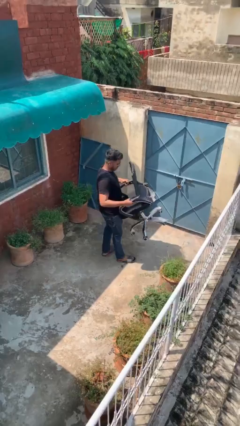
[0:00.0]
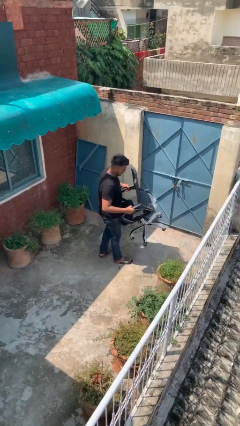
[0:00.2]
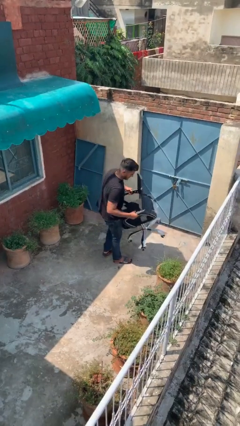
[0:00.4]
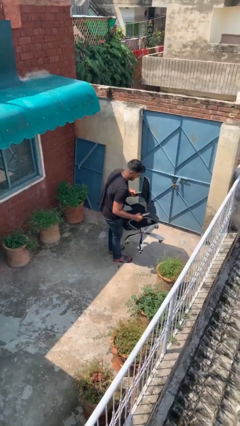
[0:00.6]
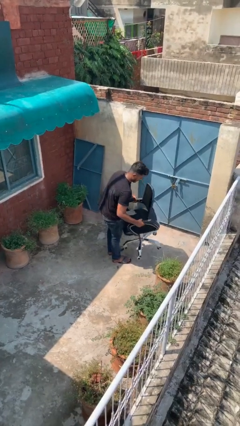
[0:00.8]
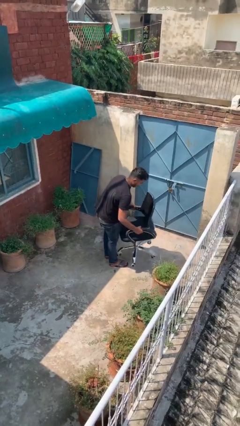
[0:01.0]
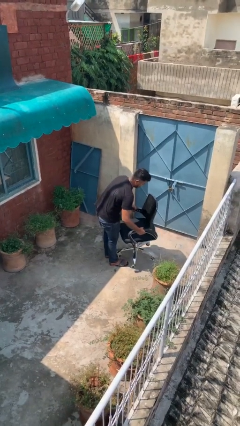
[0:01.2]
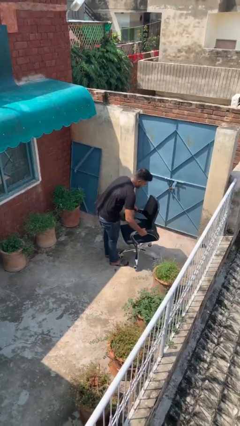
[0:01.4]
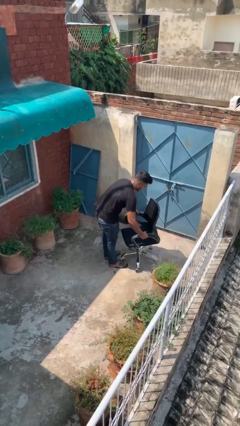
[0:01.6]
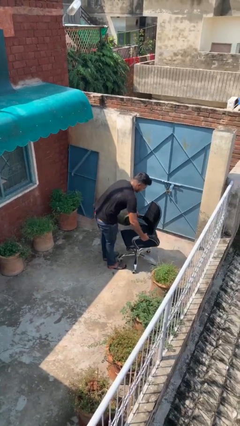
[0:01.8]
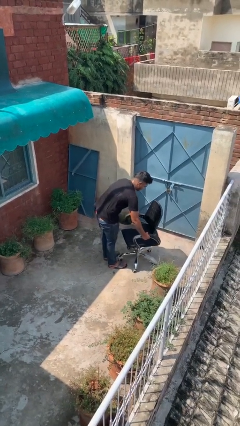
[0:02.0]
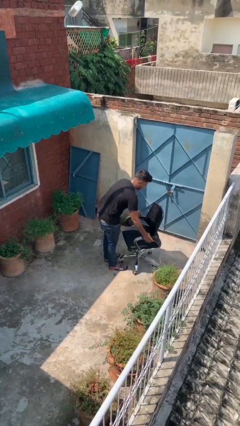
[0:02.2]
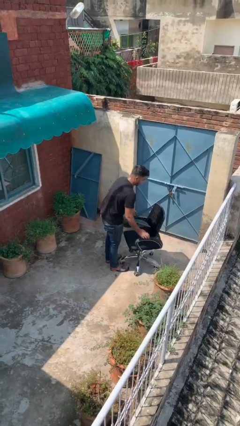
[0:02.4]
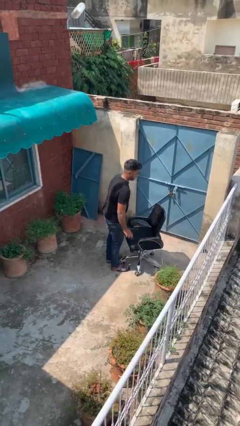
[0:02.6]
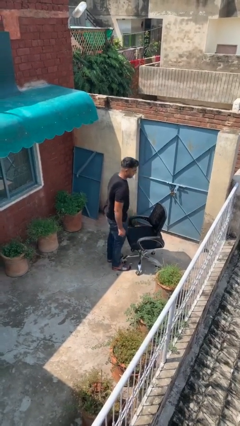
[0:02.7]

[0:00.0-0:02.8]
person puts down object on floor

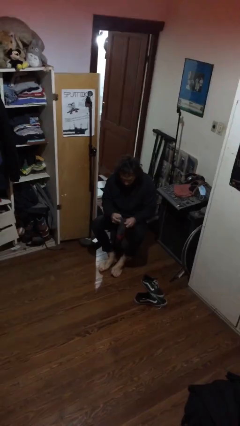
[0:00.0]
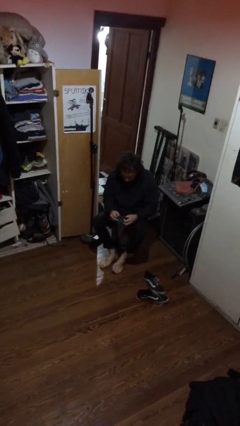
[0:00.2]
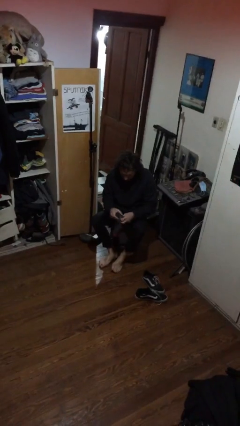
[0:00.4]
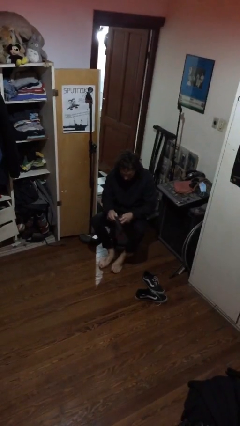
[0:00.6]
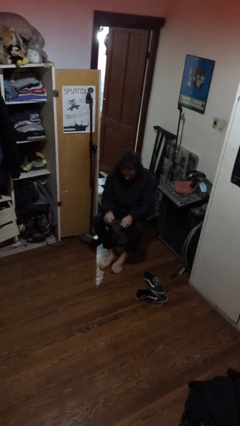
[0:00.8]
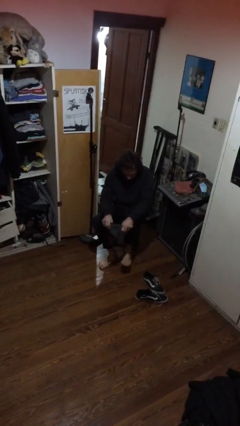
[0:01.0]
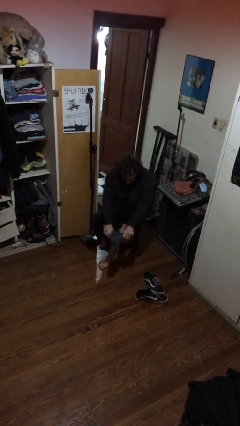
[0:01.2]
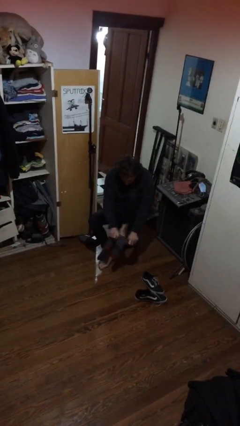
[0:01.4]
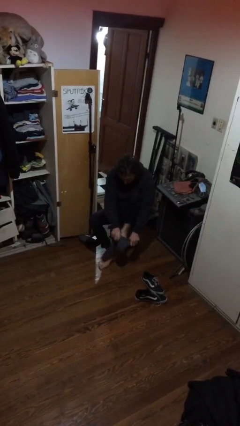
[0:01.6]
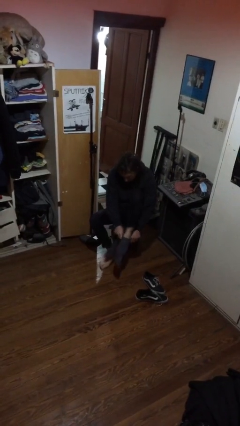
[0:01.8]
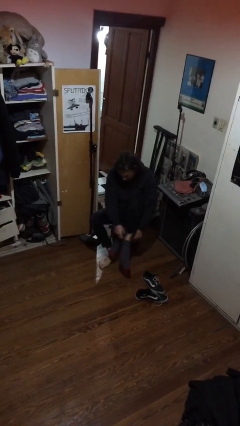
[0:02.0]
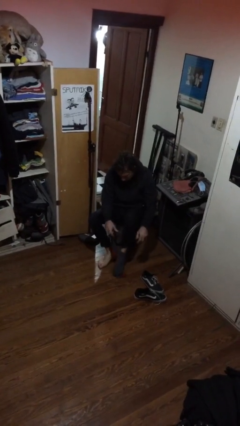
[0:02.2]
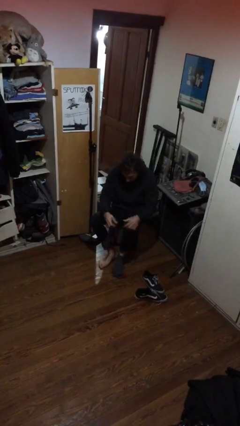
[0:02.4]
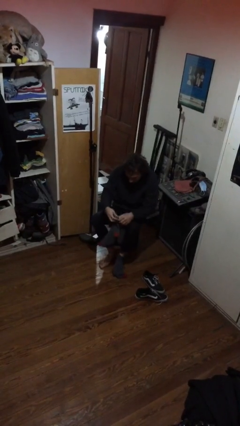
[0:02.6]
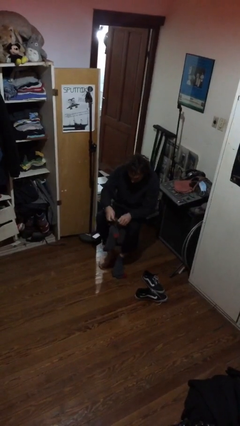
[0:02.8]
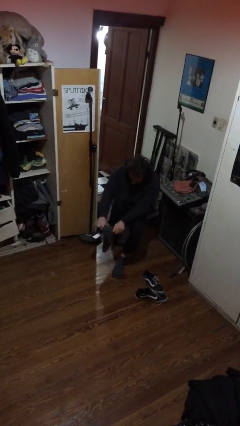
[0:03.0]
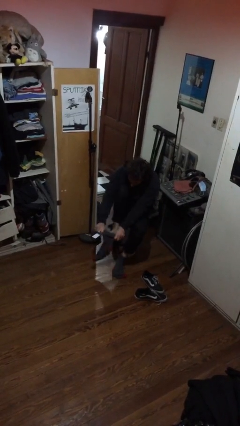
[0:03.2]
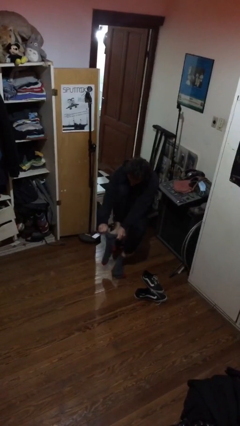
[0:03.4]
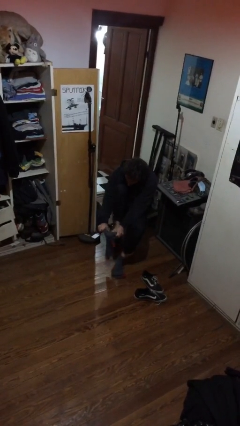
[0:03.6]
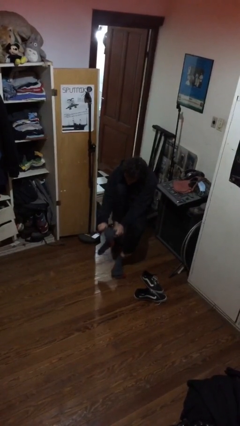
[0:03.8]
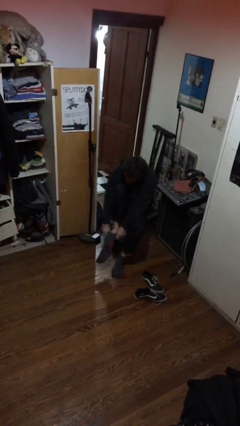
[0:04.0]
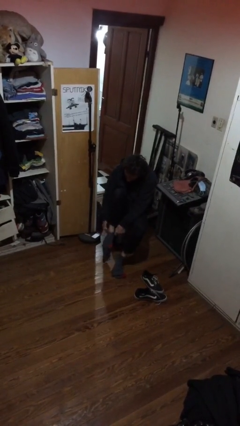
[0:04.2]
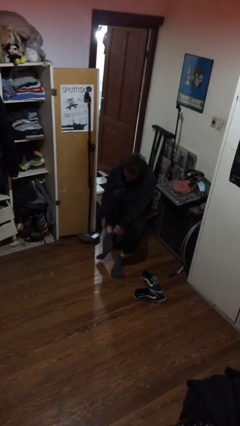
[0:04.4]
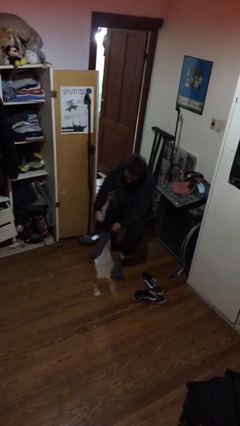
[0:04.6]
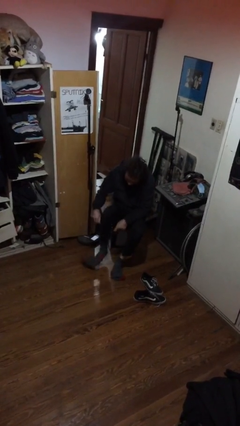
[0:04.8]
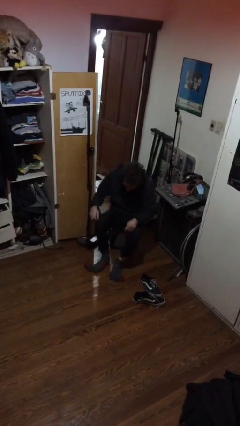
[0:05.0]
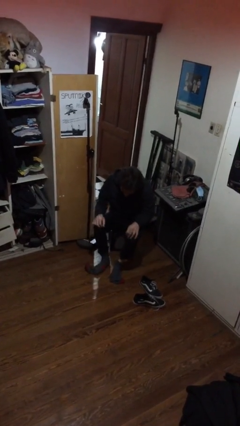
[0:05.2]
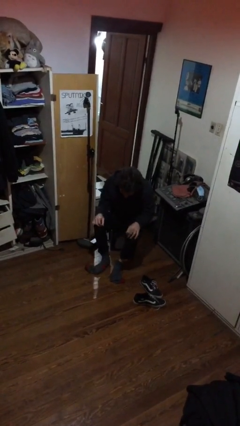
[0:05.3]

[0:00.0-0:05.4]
person puts on socks

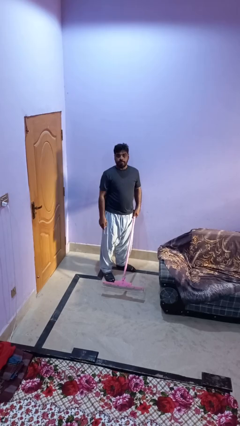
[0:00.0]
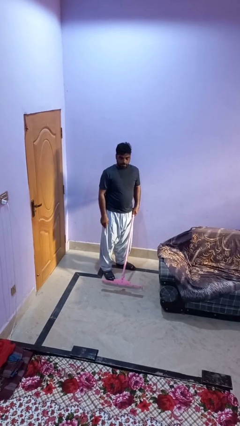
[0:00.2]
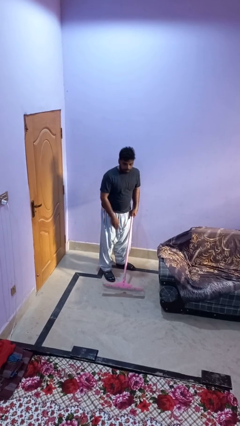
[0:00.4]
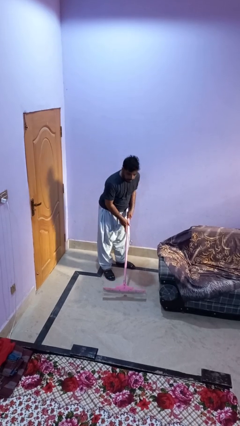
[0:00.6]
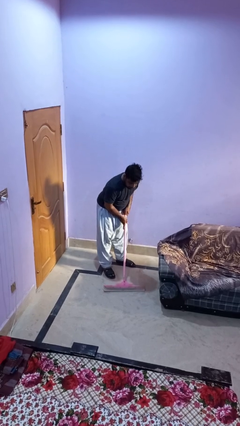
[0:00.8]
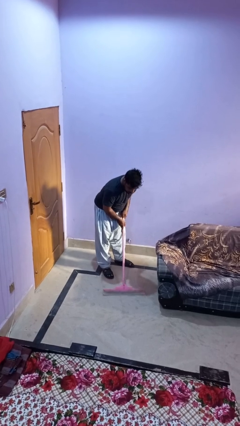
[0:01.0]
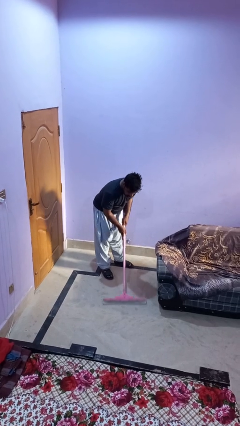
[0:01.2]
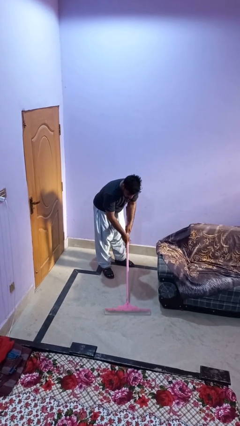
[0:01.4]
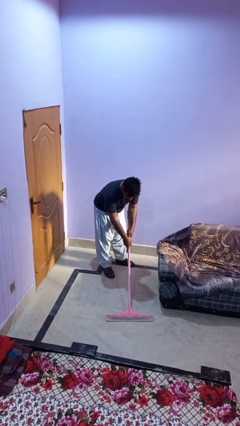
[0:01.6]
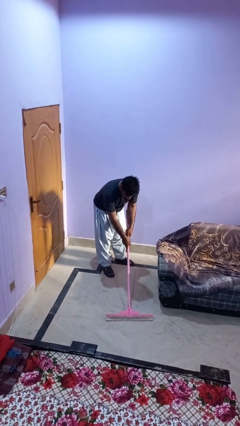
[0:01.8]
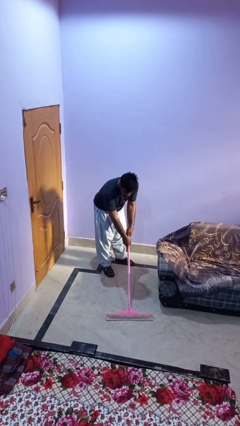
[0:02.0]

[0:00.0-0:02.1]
person vacuums carpet

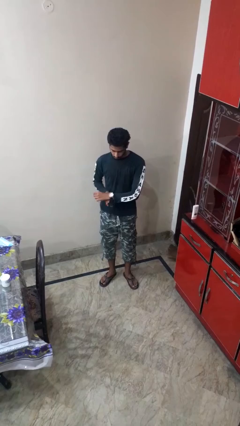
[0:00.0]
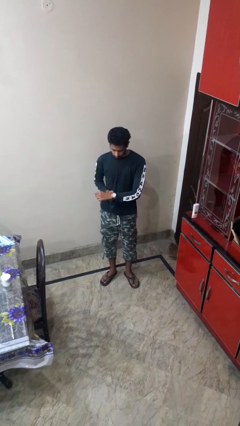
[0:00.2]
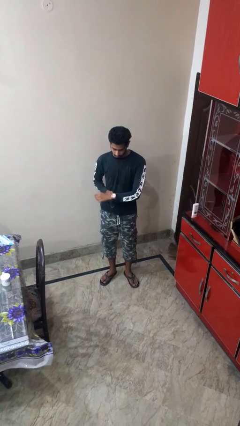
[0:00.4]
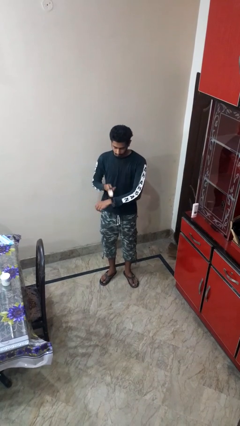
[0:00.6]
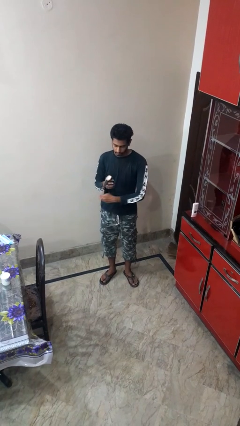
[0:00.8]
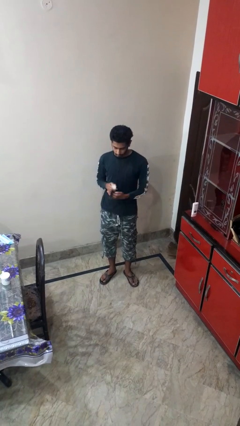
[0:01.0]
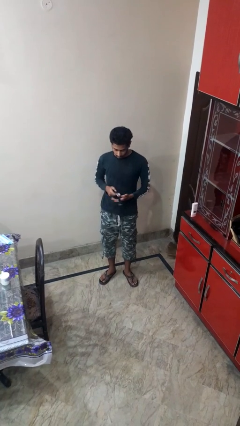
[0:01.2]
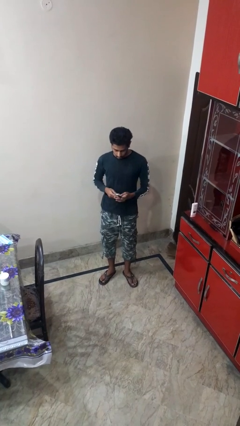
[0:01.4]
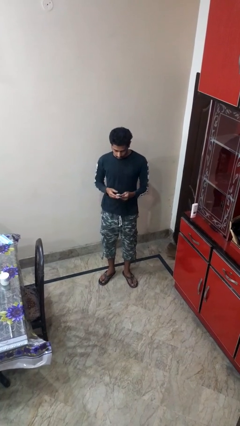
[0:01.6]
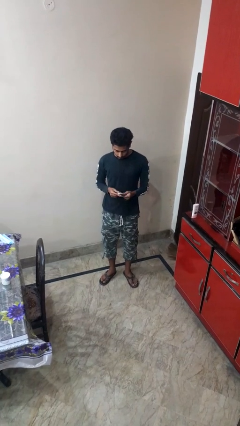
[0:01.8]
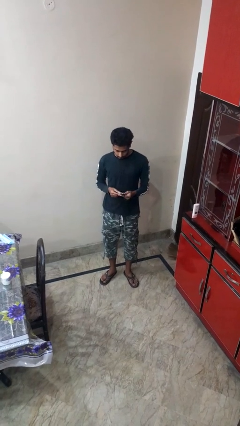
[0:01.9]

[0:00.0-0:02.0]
person takes off wristwatch

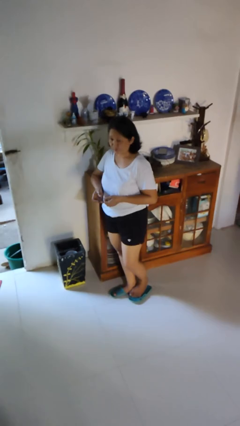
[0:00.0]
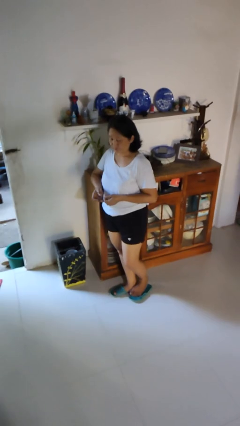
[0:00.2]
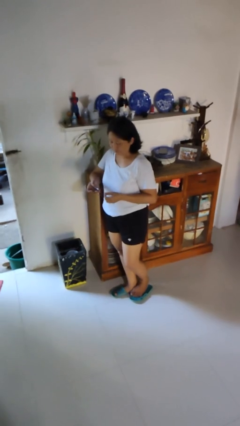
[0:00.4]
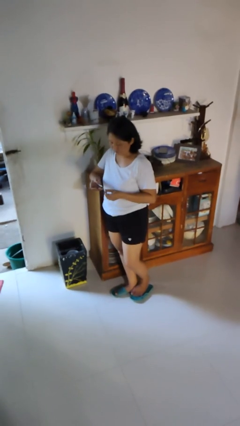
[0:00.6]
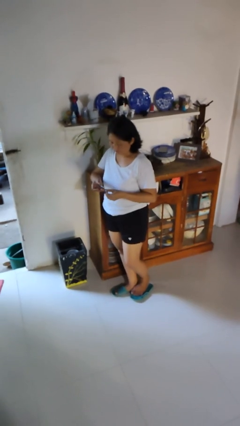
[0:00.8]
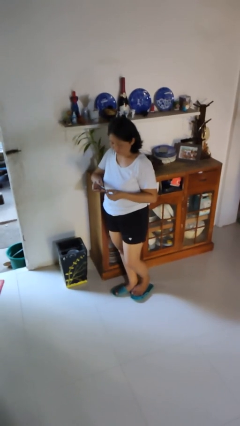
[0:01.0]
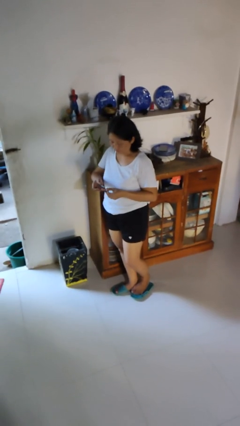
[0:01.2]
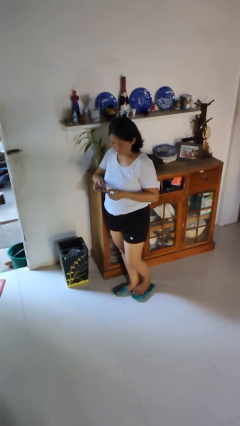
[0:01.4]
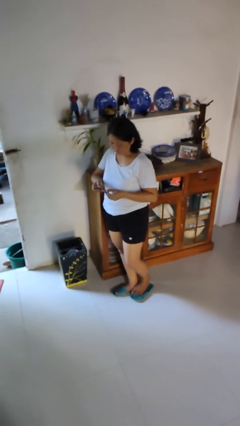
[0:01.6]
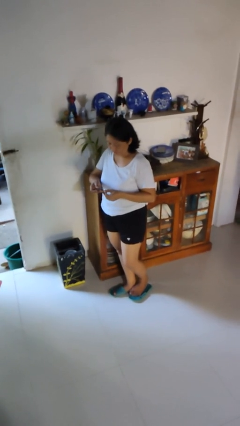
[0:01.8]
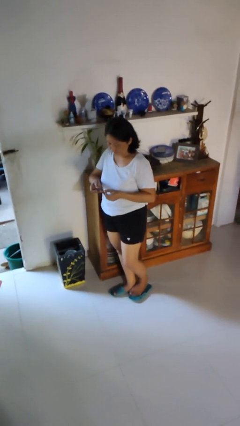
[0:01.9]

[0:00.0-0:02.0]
person clips fingernails

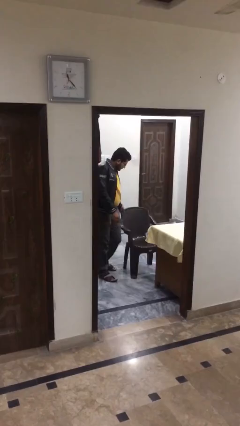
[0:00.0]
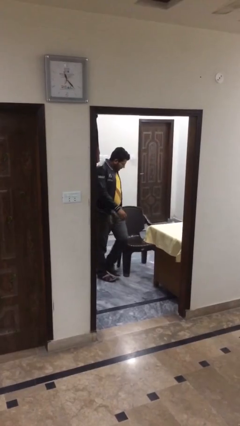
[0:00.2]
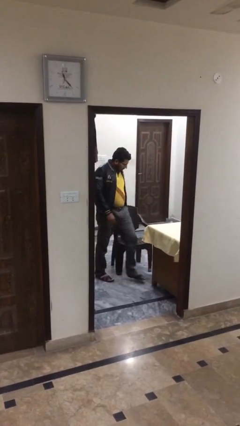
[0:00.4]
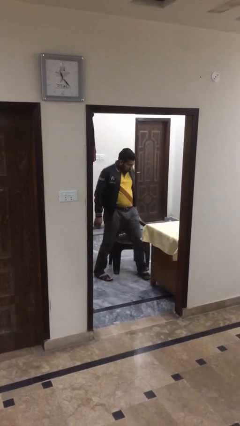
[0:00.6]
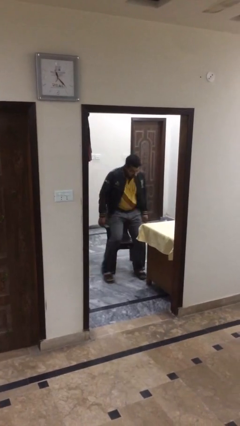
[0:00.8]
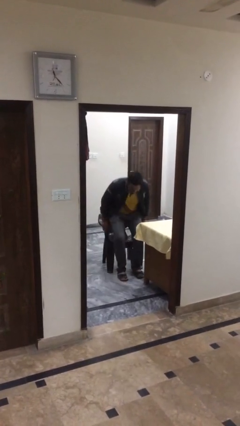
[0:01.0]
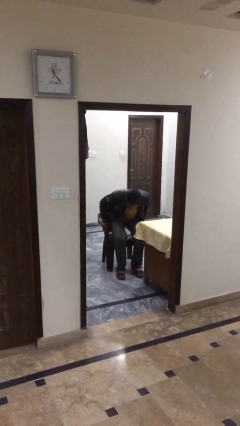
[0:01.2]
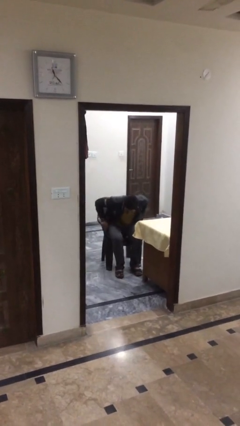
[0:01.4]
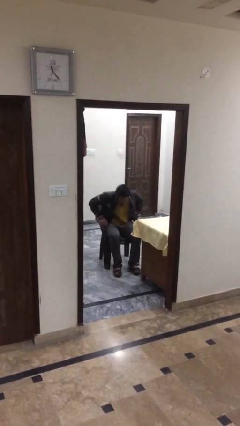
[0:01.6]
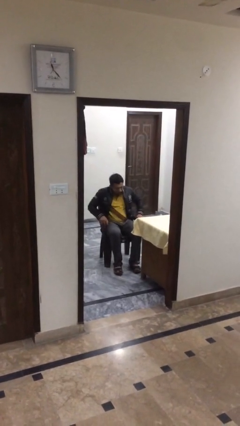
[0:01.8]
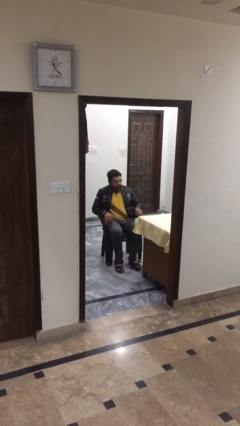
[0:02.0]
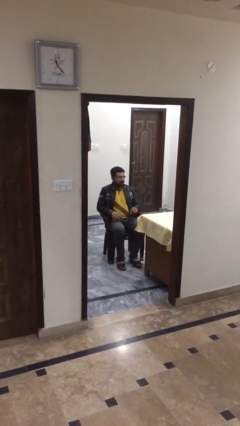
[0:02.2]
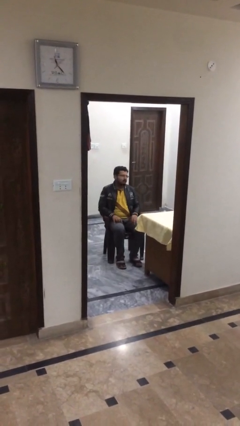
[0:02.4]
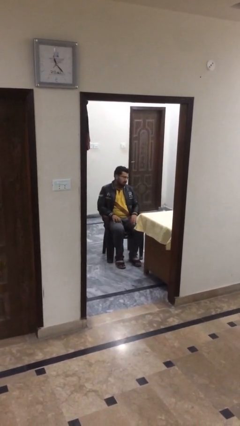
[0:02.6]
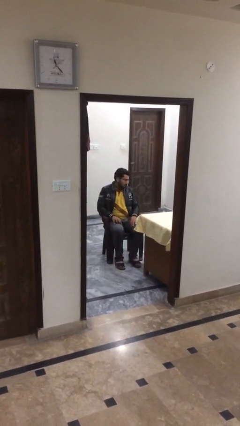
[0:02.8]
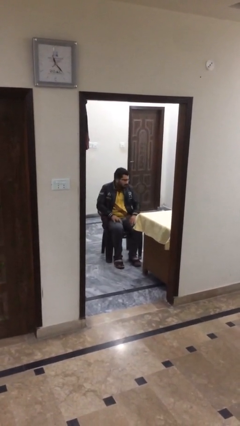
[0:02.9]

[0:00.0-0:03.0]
person sits down

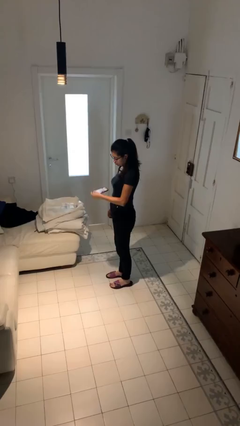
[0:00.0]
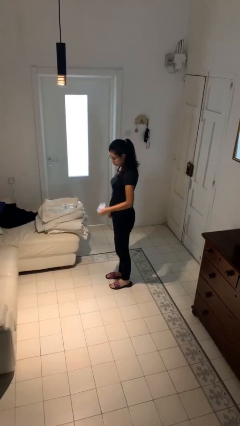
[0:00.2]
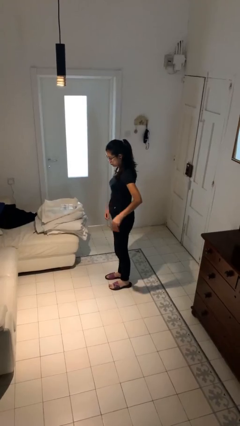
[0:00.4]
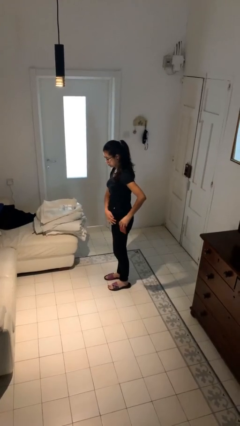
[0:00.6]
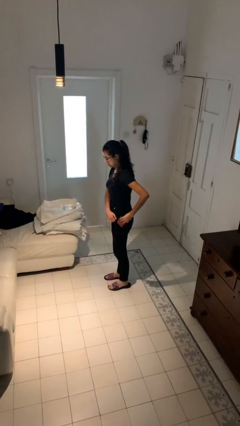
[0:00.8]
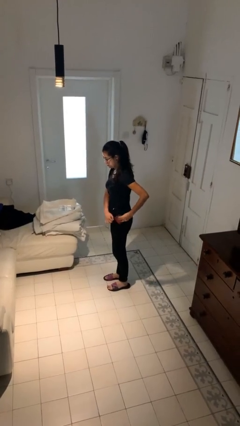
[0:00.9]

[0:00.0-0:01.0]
person puts phone into pocket
